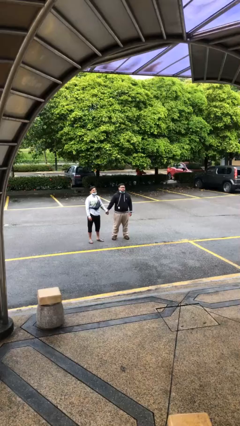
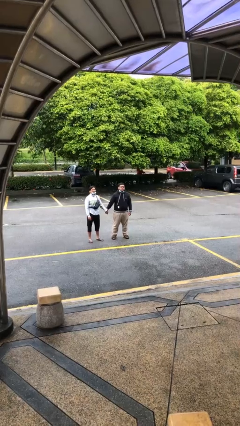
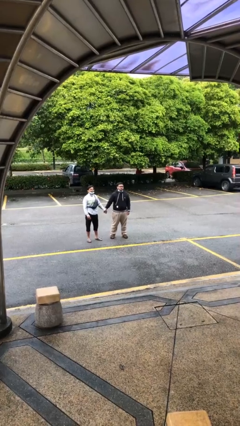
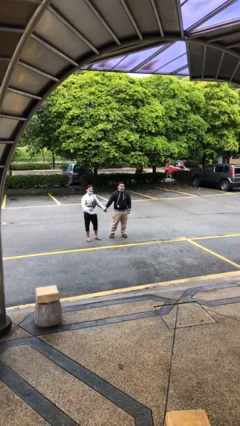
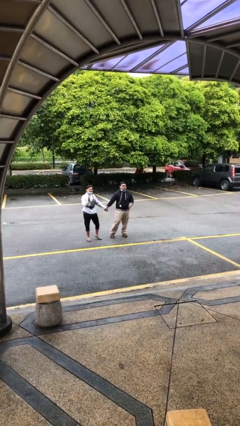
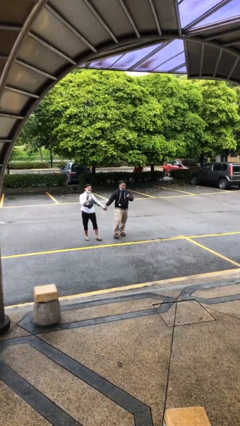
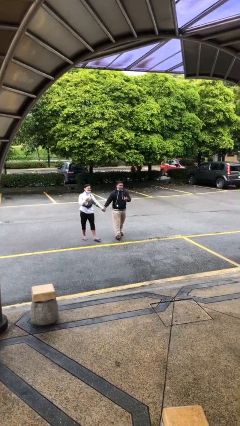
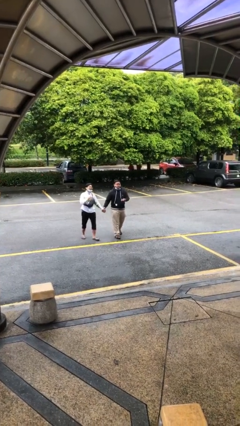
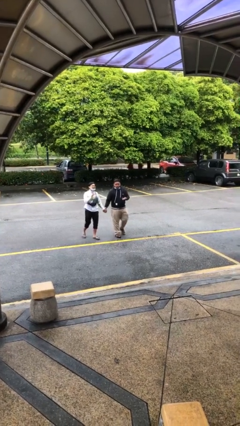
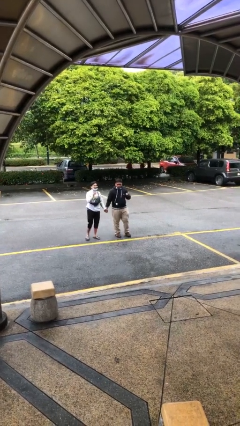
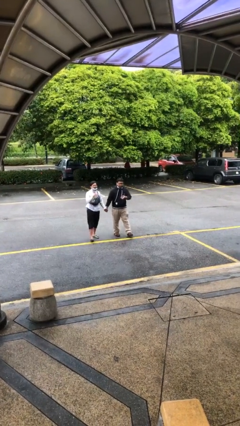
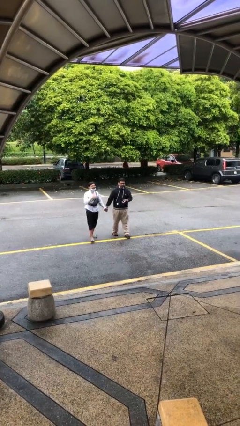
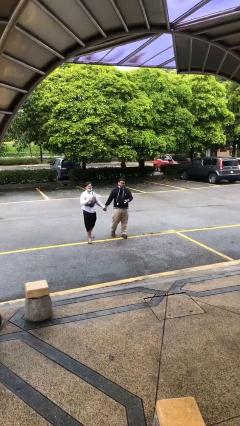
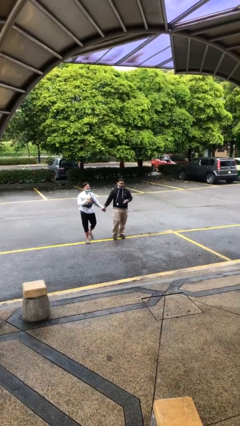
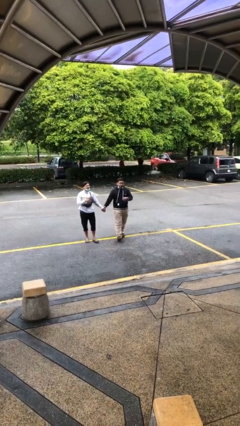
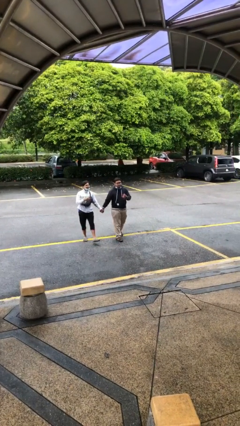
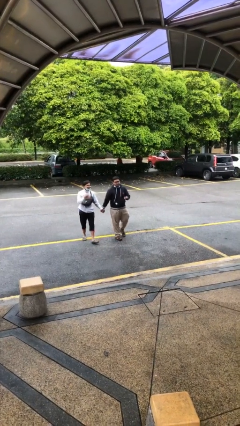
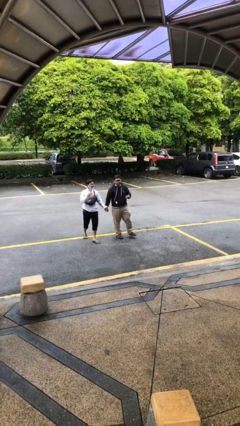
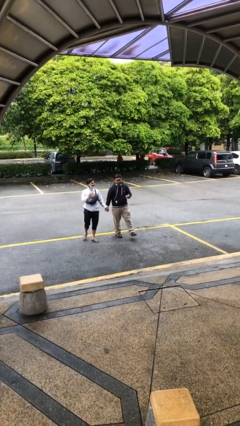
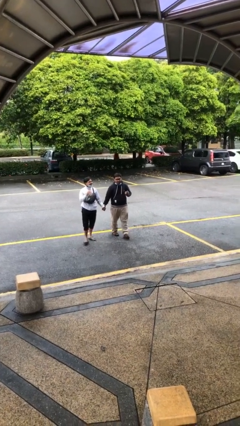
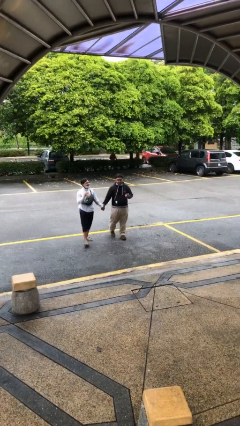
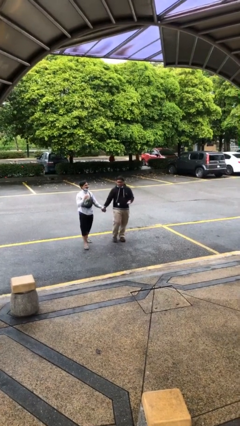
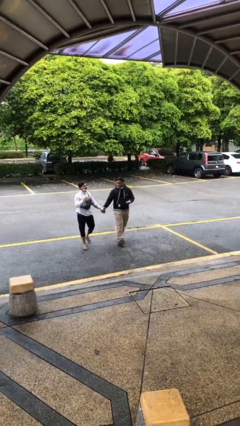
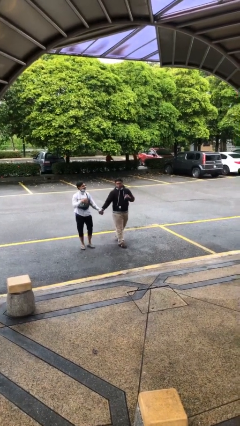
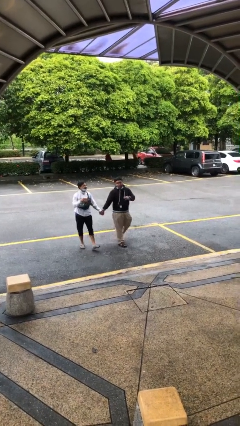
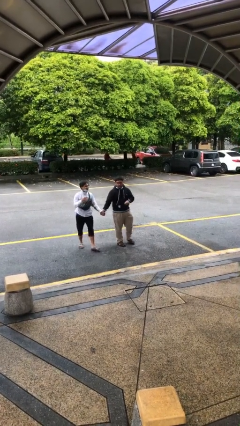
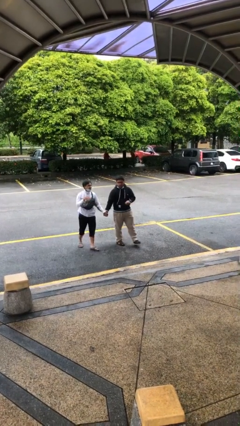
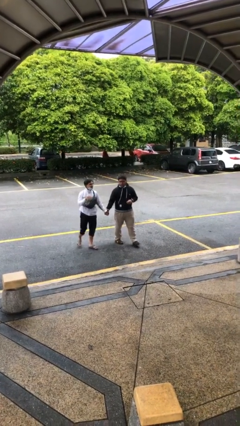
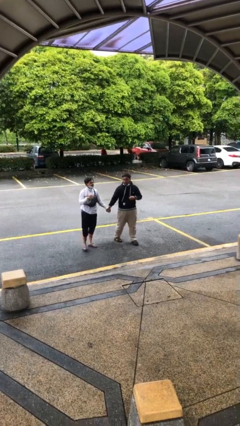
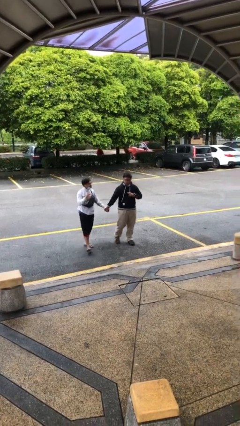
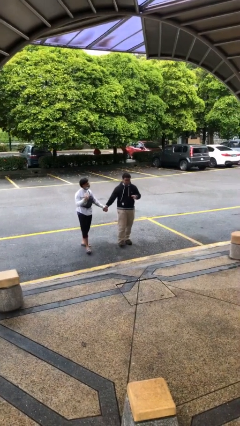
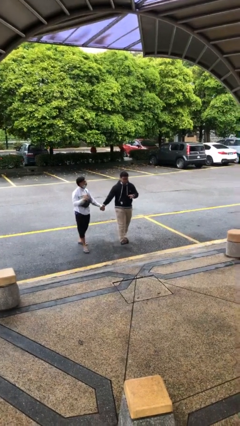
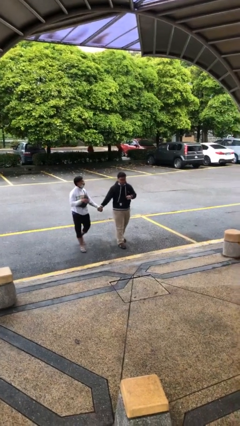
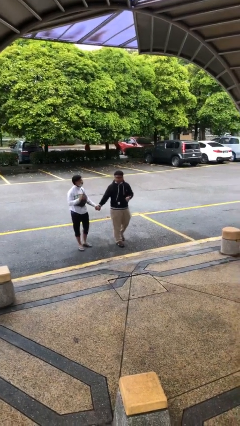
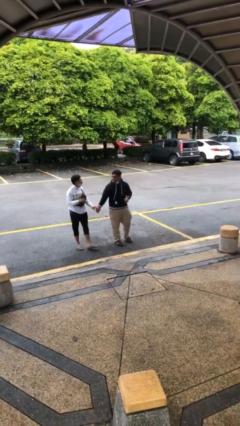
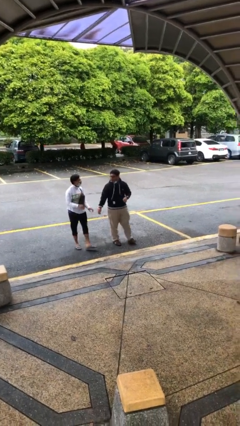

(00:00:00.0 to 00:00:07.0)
person holds hand

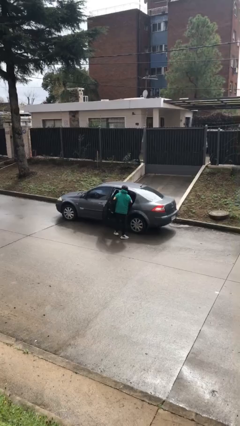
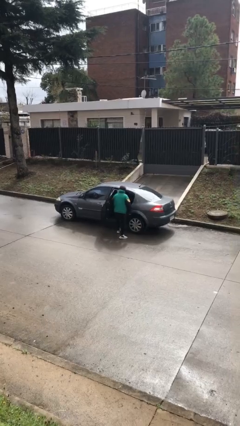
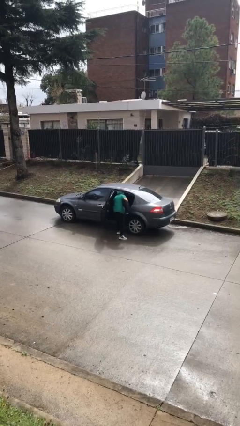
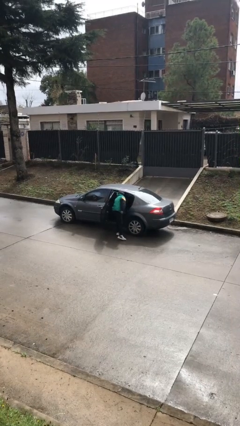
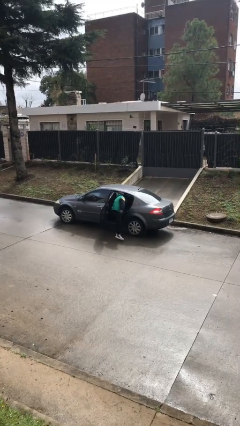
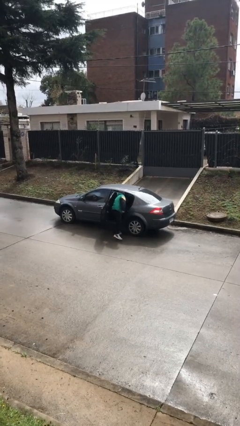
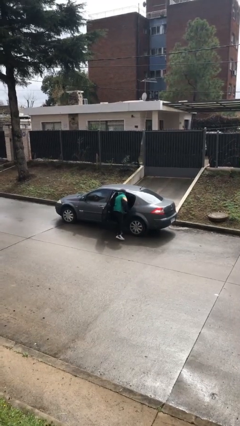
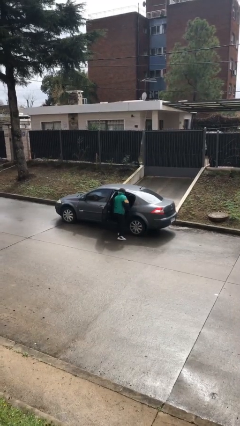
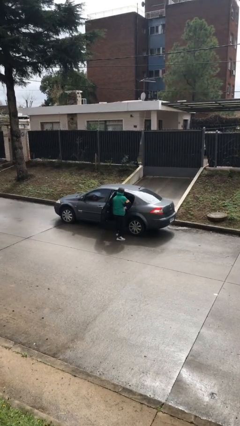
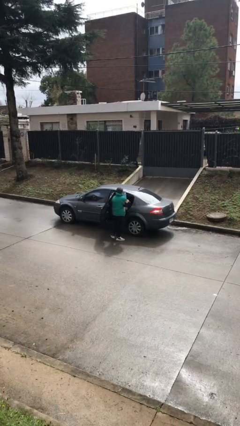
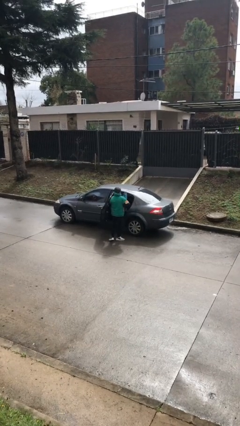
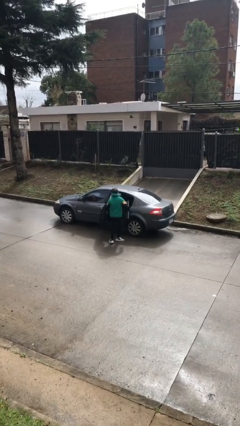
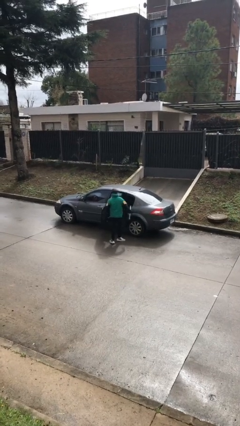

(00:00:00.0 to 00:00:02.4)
person unloads car

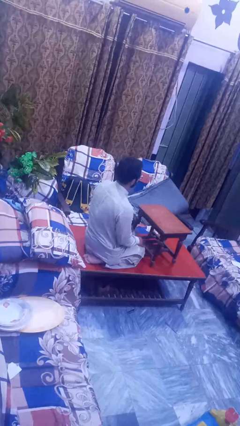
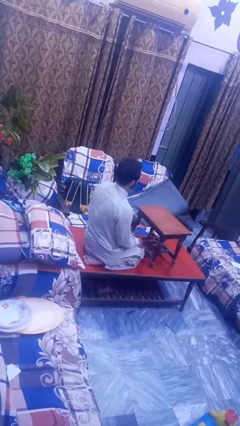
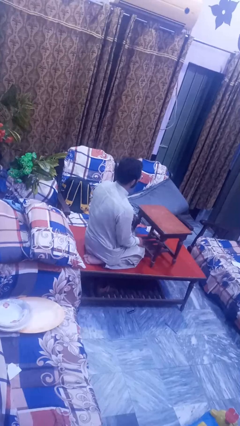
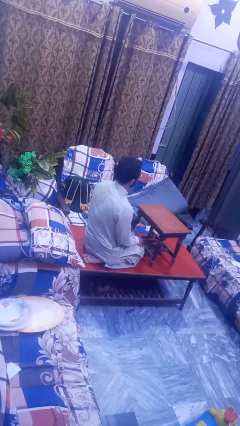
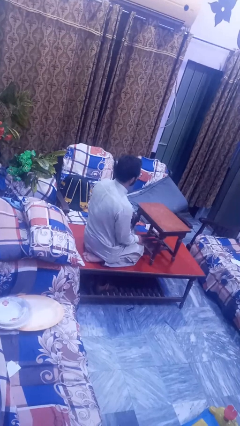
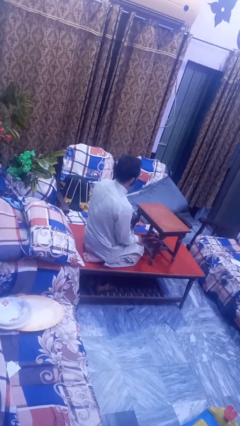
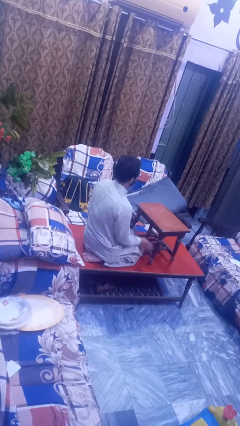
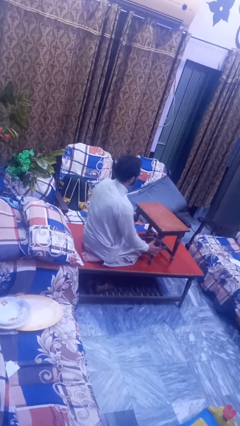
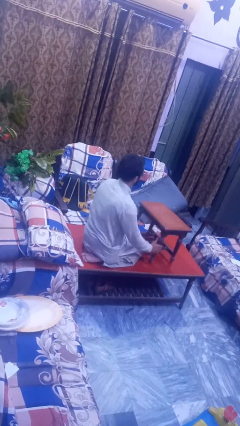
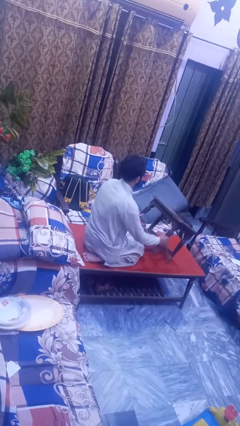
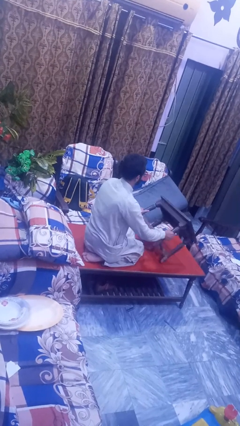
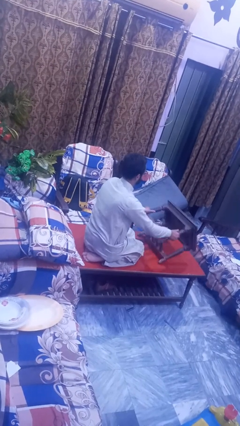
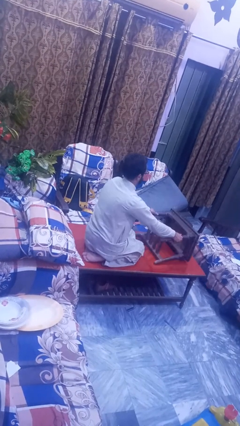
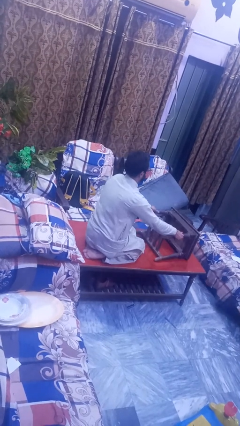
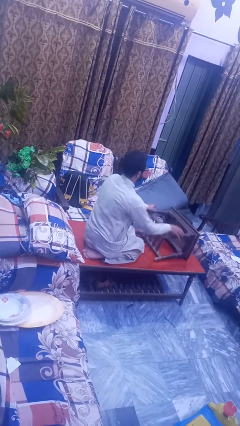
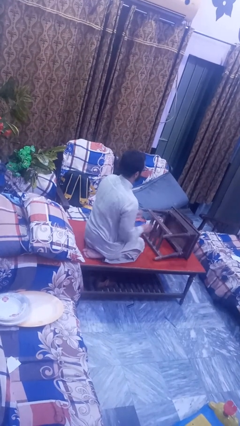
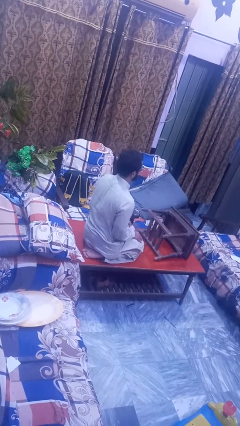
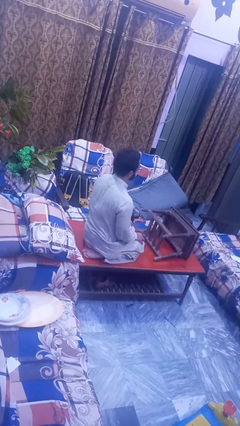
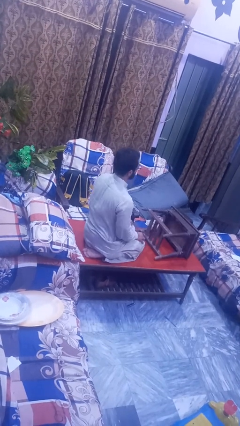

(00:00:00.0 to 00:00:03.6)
person knocks over furniture

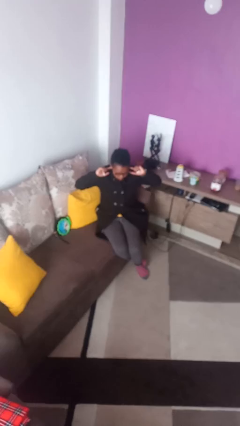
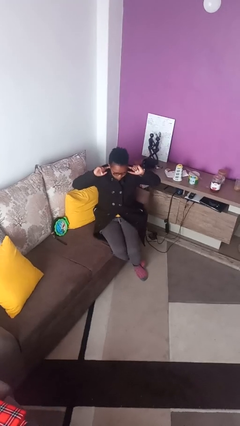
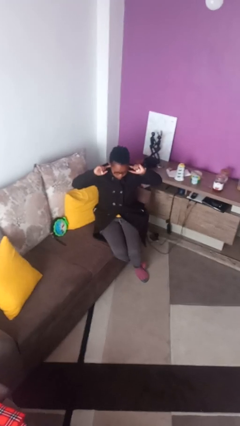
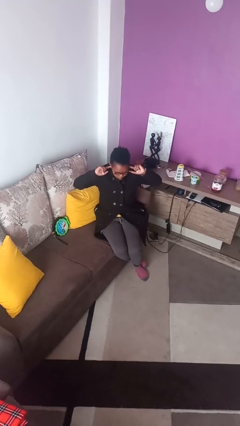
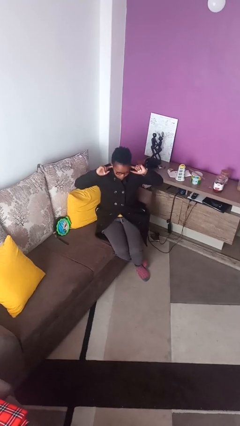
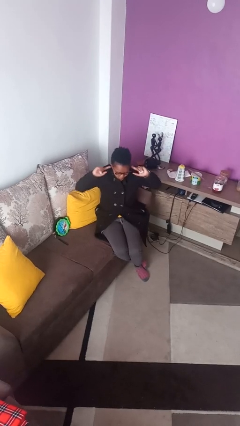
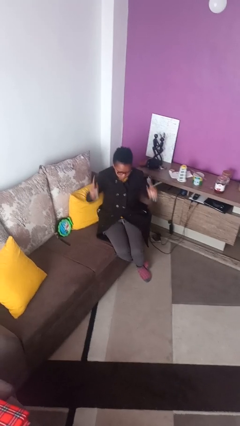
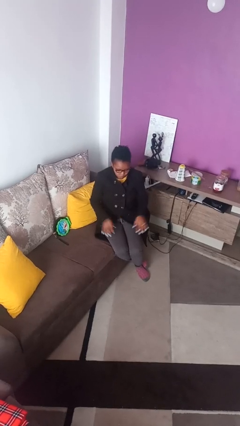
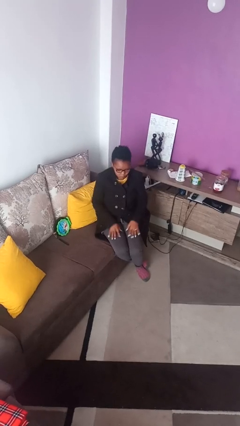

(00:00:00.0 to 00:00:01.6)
person puts fingers in ear

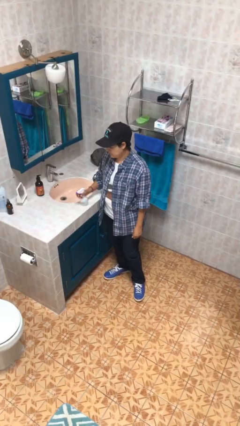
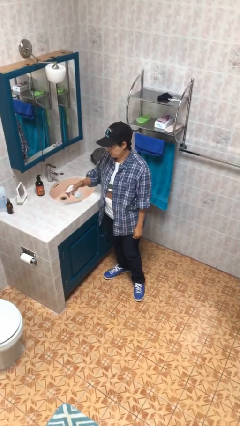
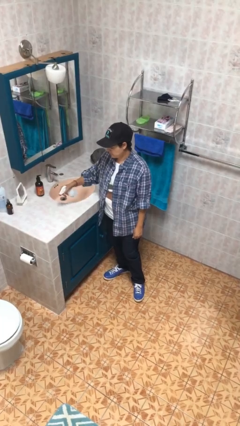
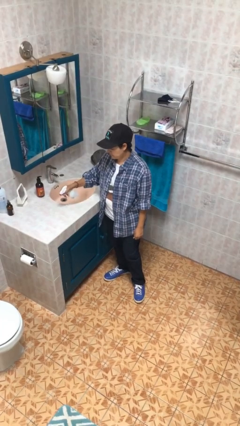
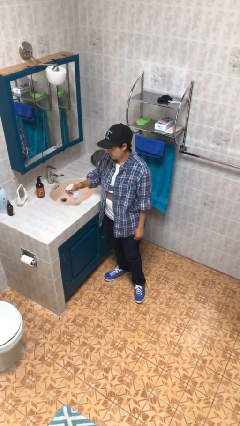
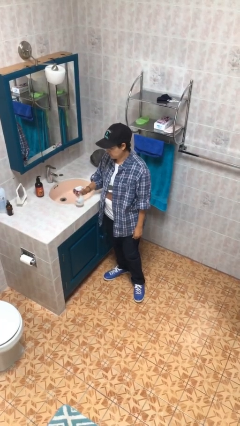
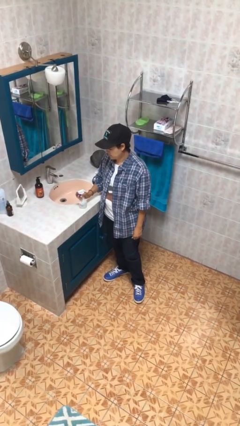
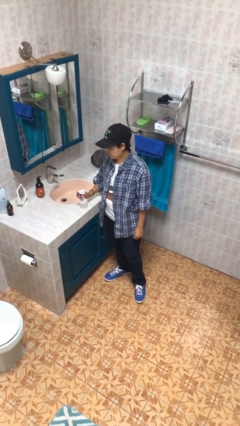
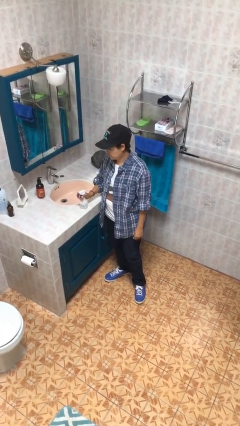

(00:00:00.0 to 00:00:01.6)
person sprays from bottle

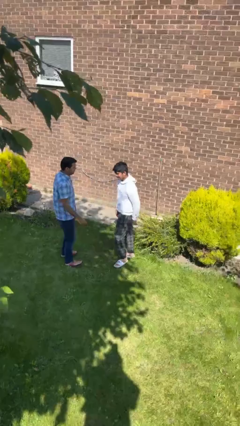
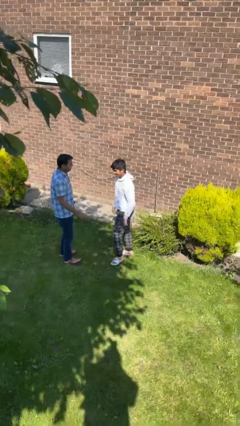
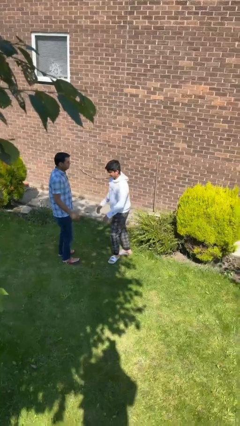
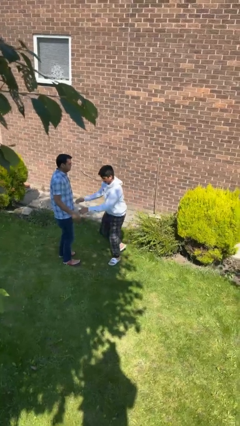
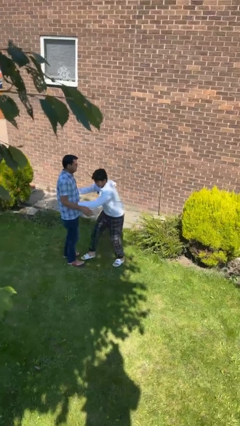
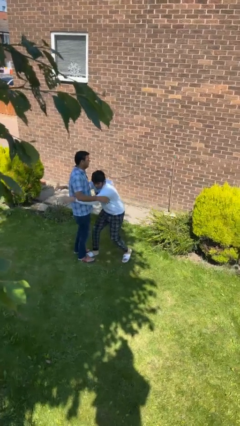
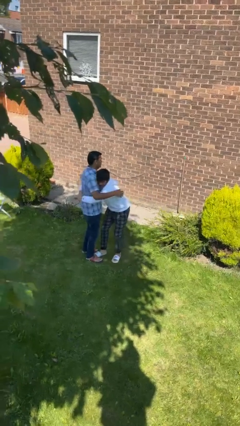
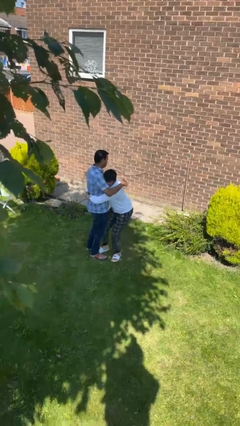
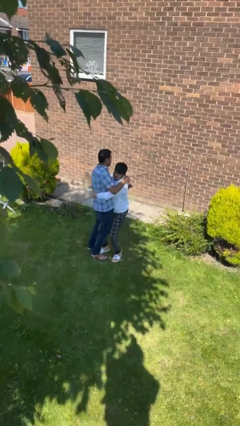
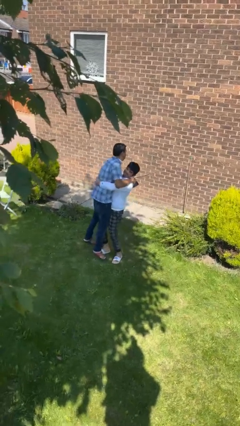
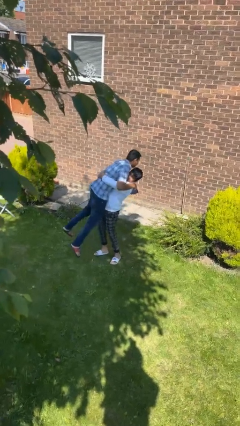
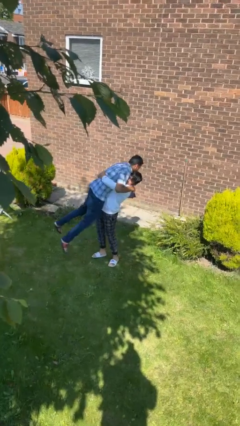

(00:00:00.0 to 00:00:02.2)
person picks up person
